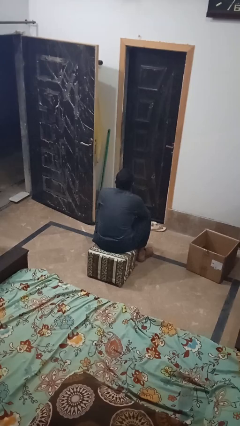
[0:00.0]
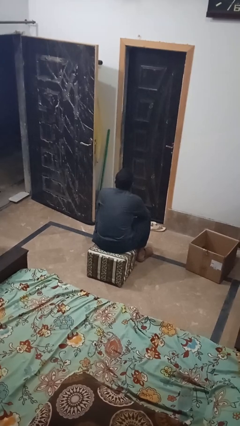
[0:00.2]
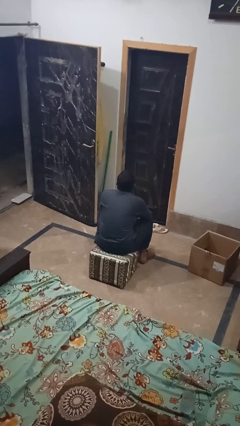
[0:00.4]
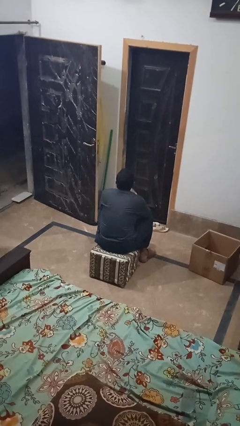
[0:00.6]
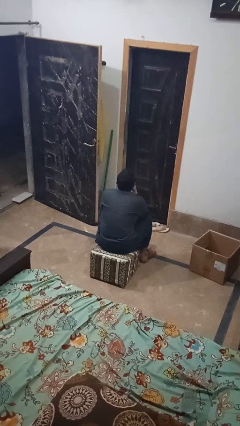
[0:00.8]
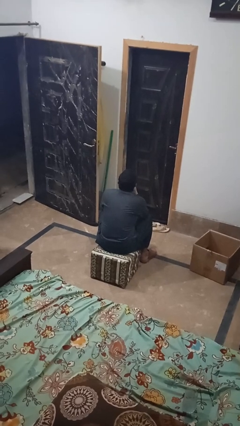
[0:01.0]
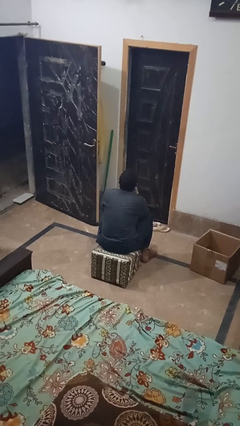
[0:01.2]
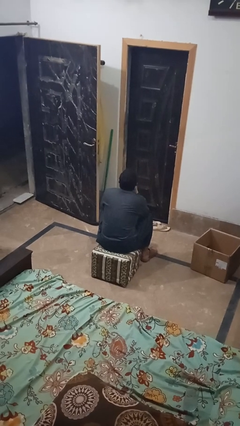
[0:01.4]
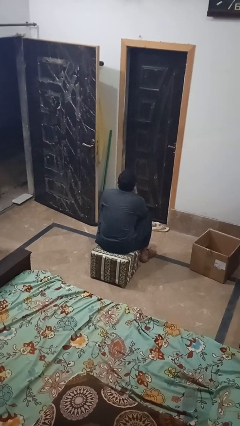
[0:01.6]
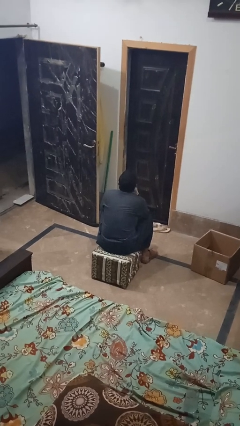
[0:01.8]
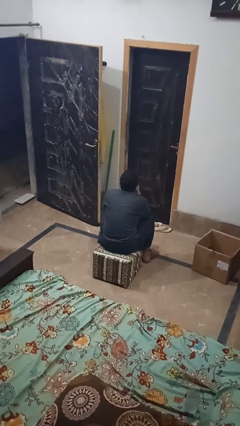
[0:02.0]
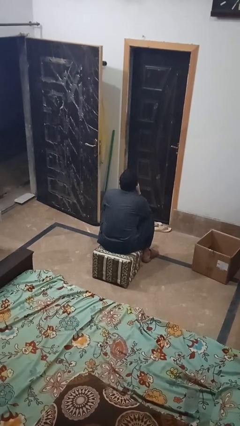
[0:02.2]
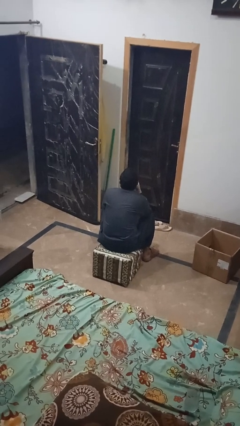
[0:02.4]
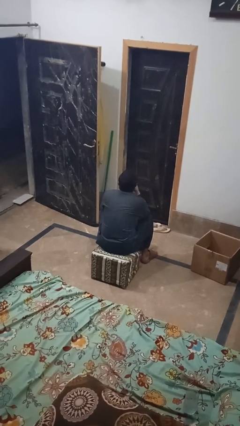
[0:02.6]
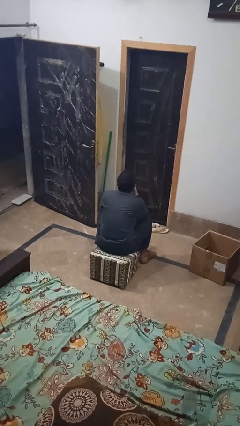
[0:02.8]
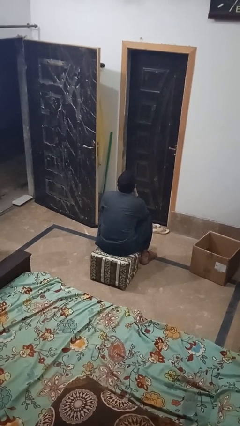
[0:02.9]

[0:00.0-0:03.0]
person strokes chin

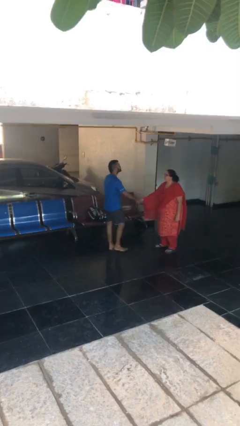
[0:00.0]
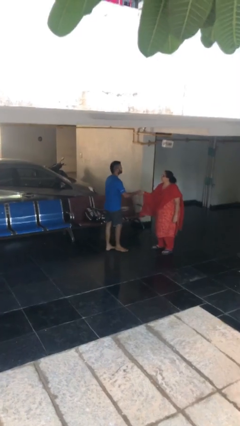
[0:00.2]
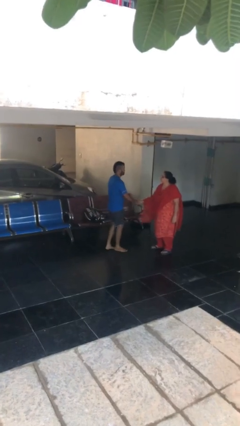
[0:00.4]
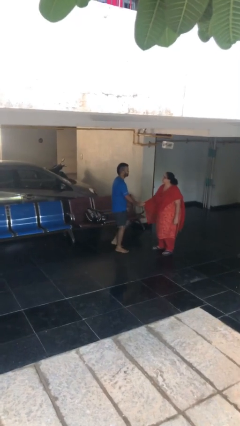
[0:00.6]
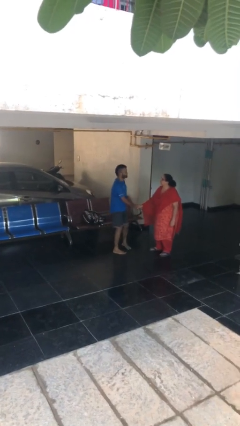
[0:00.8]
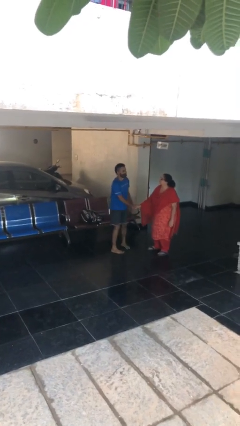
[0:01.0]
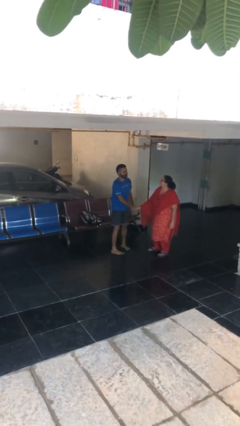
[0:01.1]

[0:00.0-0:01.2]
person shakes hand

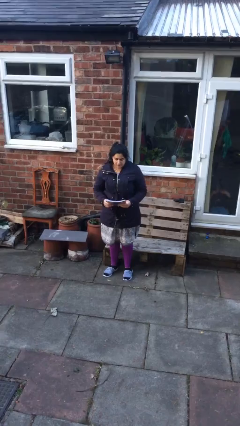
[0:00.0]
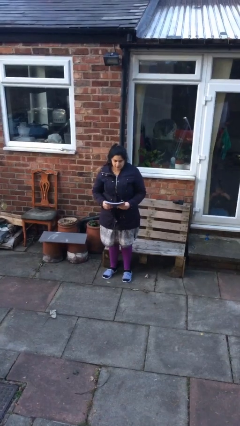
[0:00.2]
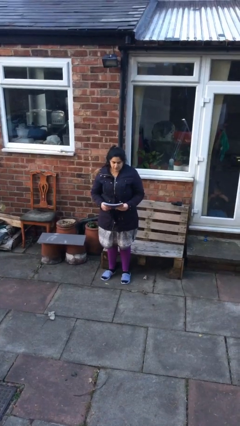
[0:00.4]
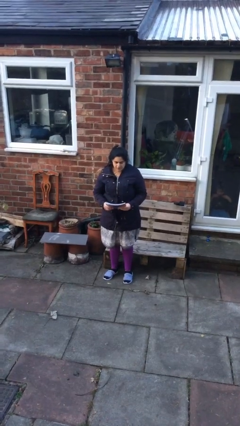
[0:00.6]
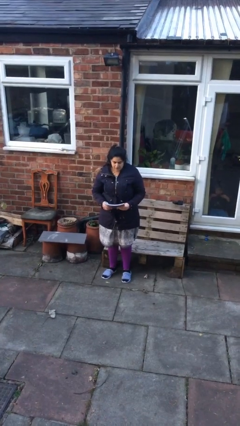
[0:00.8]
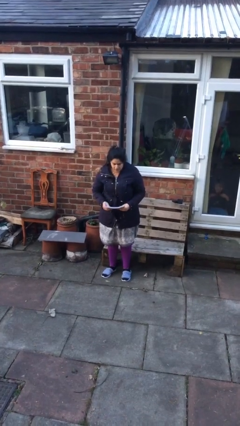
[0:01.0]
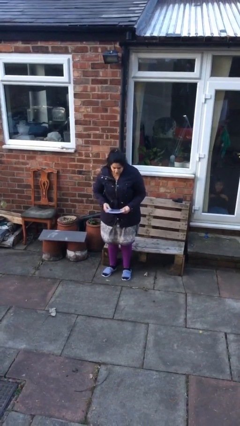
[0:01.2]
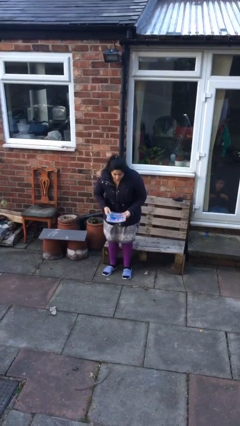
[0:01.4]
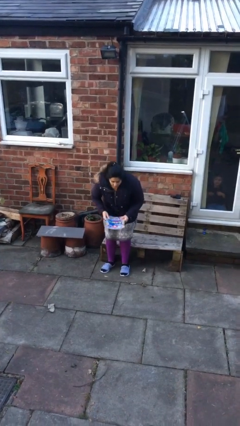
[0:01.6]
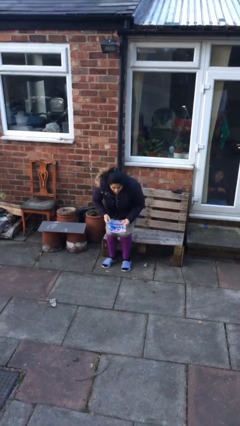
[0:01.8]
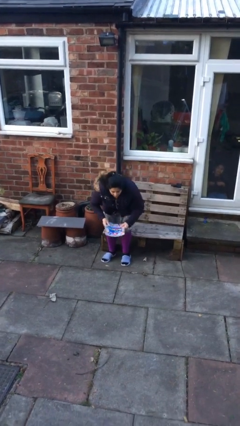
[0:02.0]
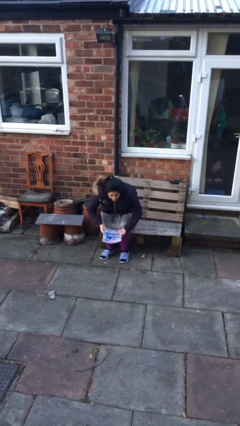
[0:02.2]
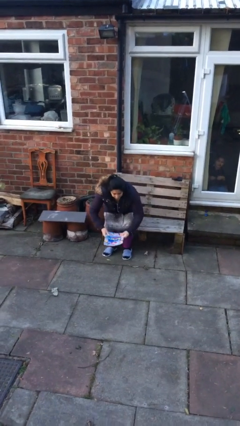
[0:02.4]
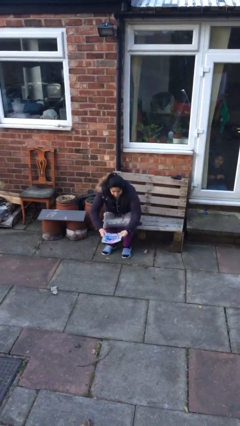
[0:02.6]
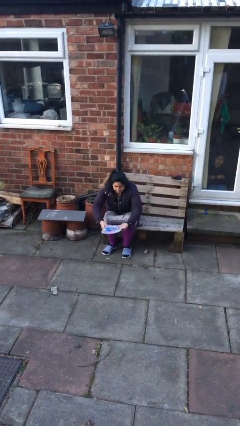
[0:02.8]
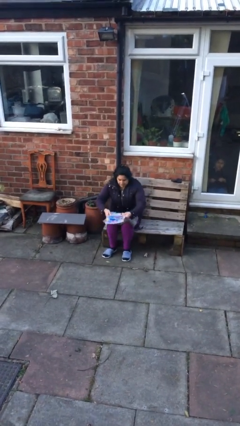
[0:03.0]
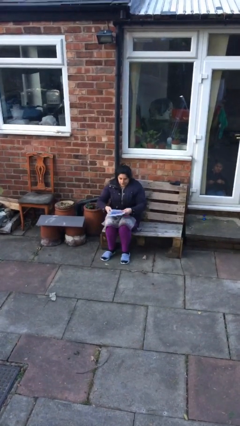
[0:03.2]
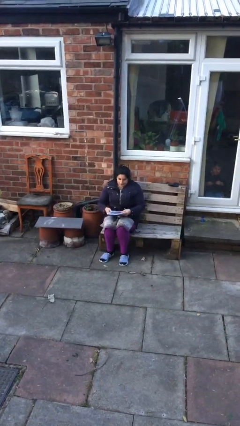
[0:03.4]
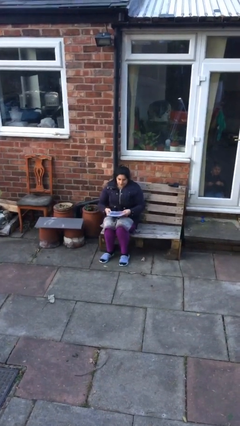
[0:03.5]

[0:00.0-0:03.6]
person sits down

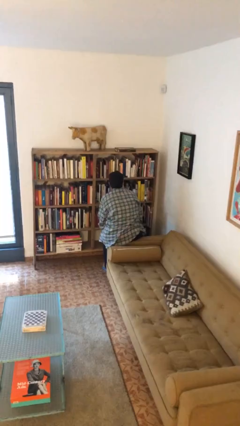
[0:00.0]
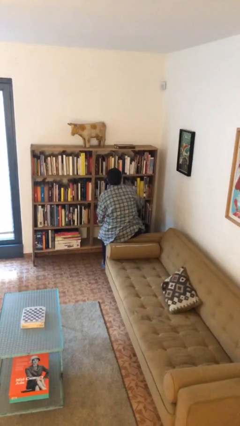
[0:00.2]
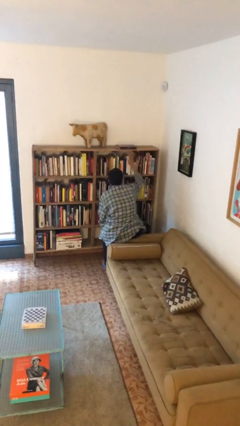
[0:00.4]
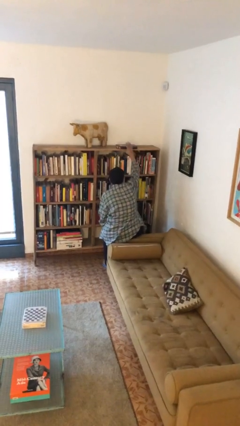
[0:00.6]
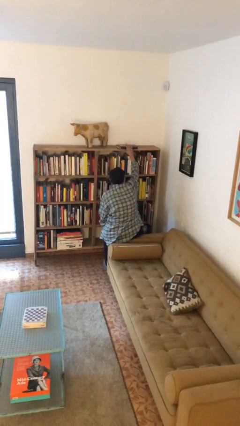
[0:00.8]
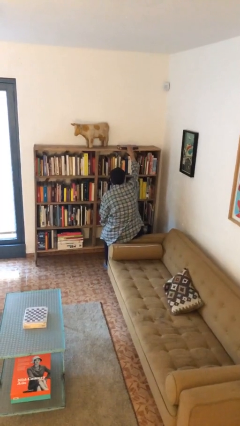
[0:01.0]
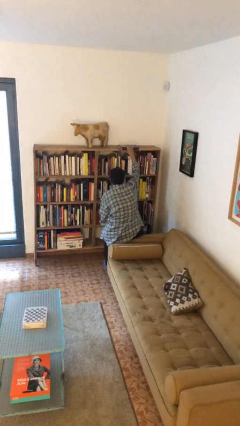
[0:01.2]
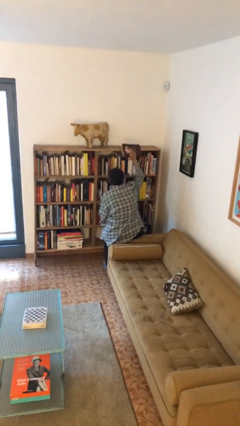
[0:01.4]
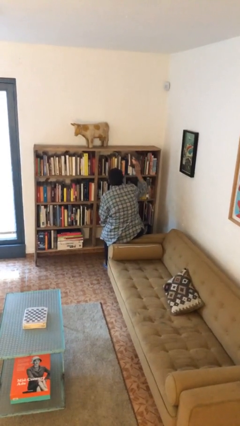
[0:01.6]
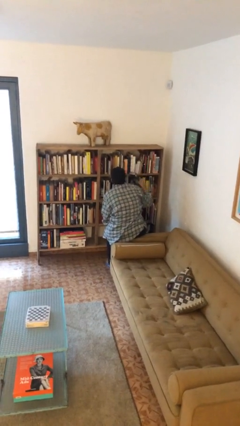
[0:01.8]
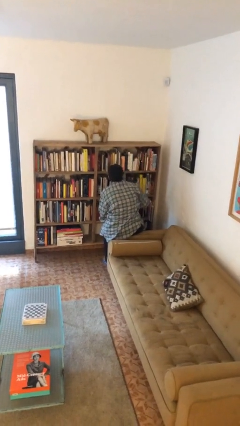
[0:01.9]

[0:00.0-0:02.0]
person picks up object from shelf

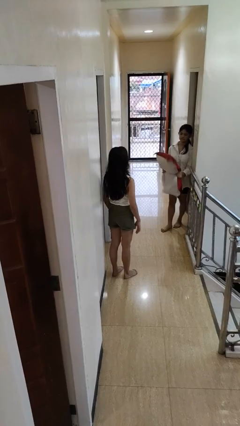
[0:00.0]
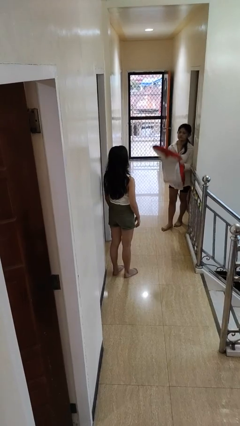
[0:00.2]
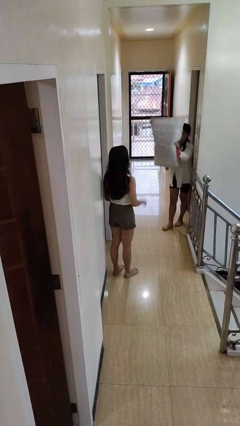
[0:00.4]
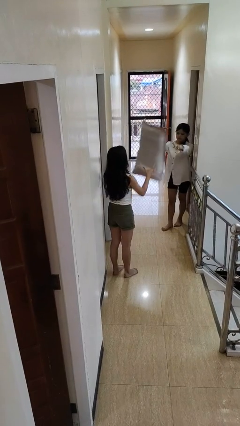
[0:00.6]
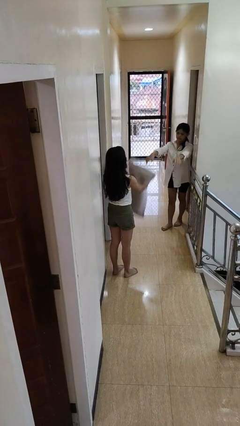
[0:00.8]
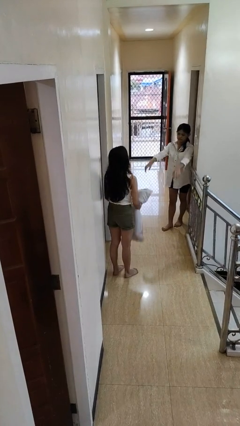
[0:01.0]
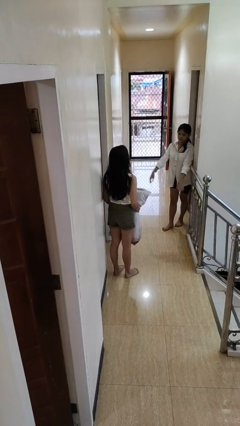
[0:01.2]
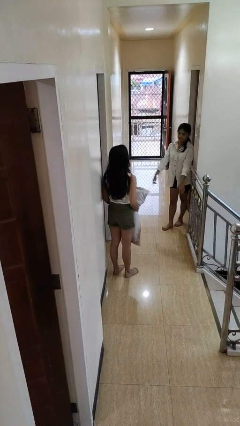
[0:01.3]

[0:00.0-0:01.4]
person catches object from person

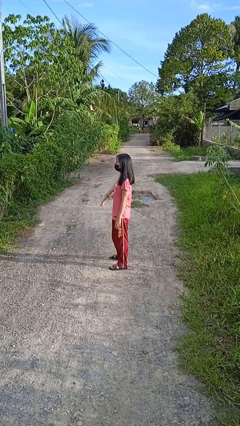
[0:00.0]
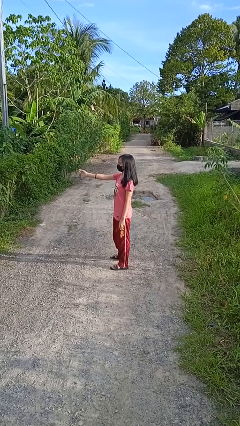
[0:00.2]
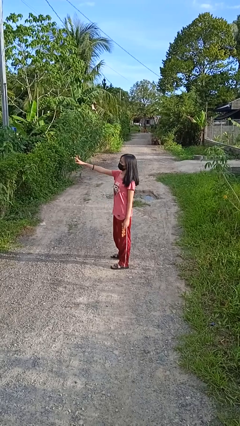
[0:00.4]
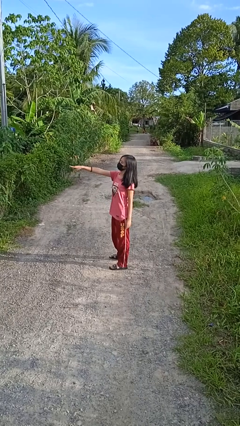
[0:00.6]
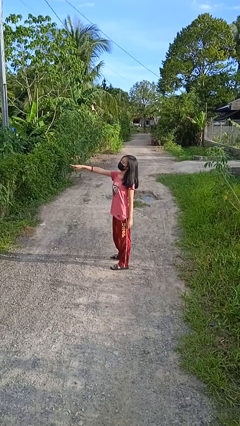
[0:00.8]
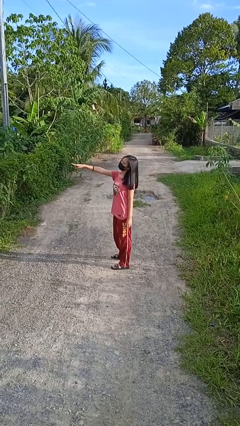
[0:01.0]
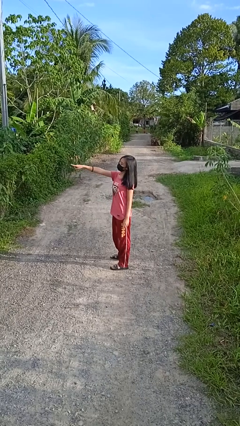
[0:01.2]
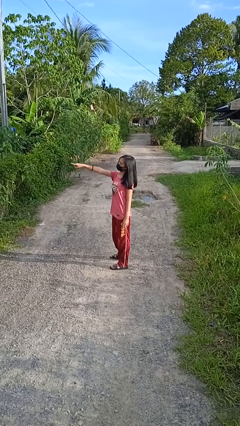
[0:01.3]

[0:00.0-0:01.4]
person points at person

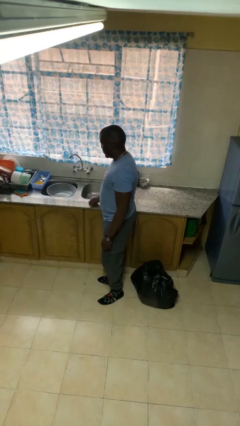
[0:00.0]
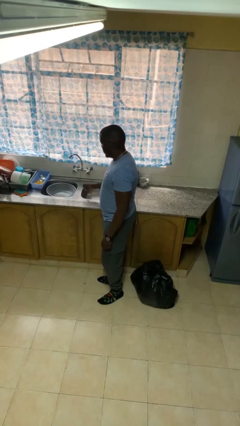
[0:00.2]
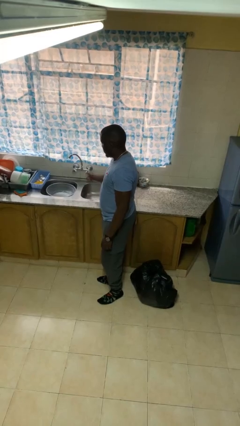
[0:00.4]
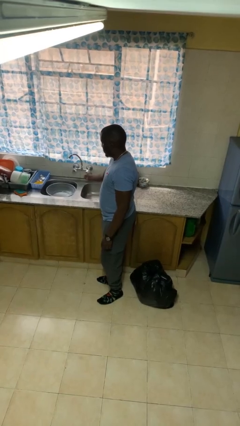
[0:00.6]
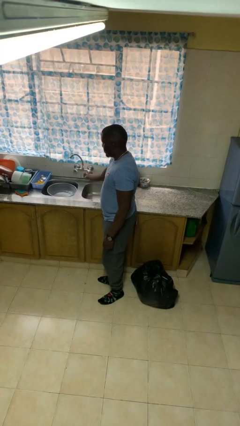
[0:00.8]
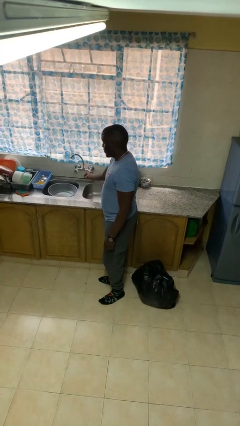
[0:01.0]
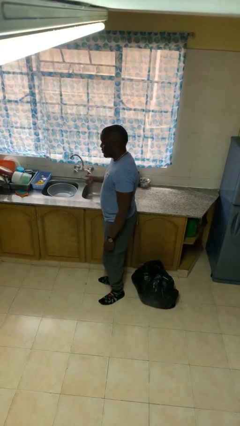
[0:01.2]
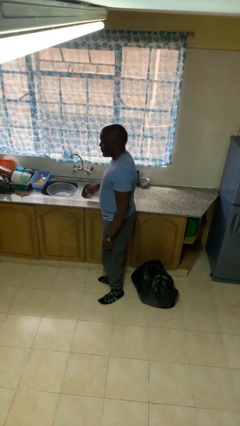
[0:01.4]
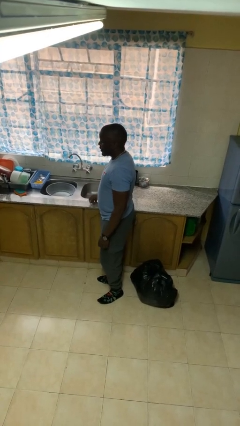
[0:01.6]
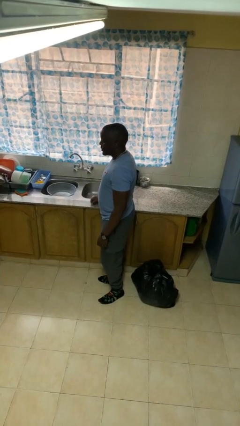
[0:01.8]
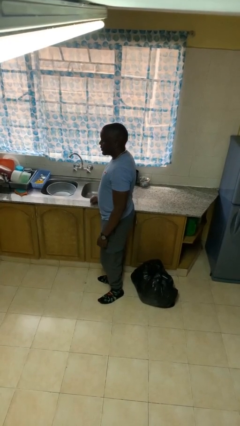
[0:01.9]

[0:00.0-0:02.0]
person turns off faucet

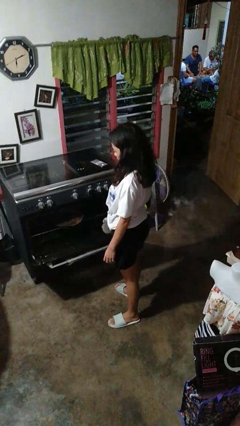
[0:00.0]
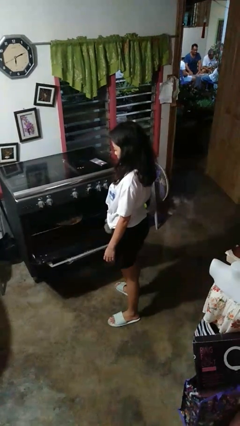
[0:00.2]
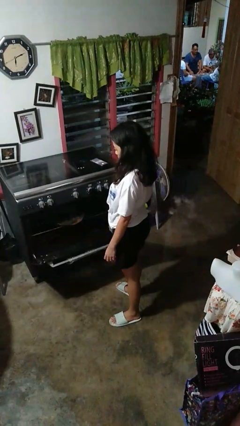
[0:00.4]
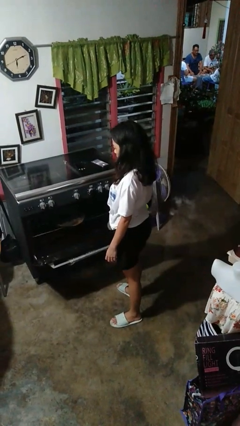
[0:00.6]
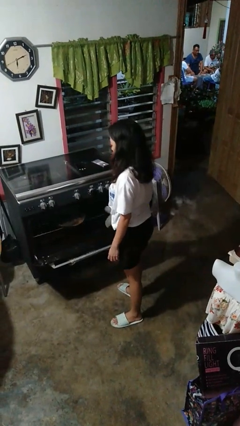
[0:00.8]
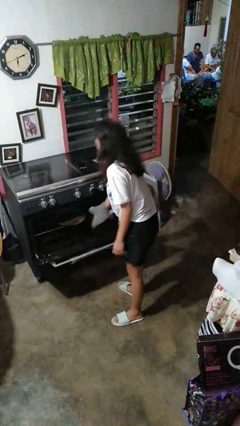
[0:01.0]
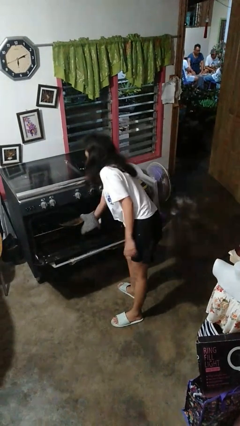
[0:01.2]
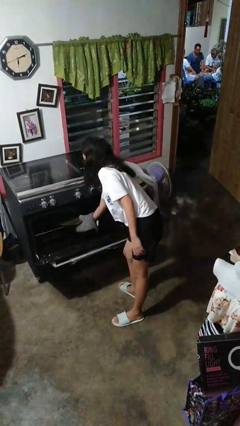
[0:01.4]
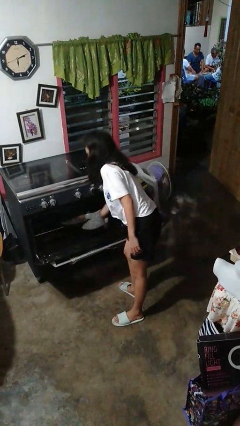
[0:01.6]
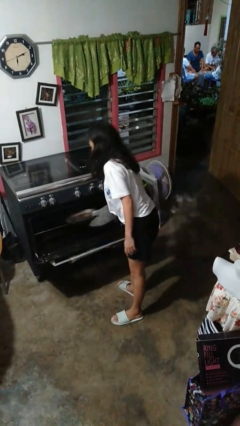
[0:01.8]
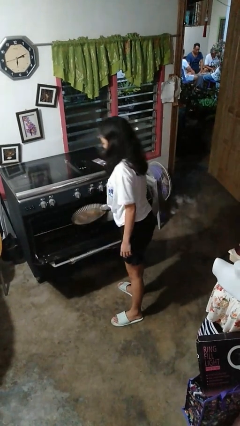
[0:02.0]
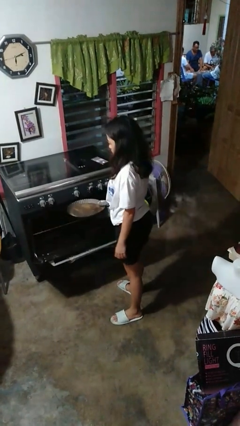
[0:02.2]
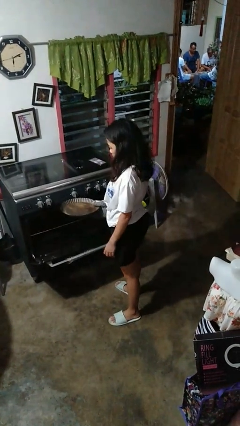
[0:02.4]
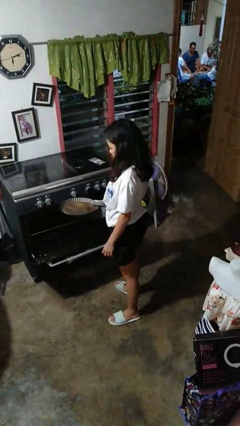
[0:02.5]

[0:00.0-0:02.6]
person takes object from oven

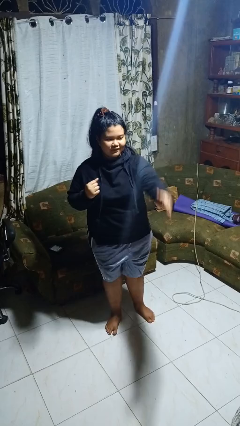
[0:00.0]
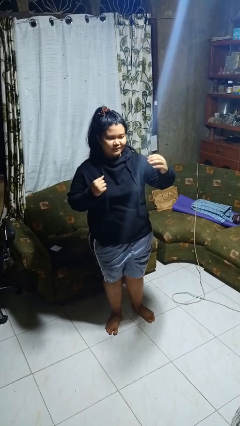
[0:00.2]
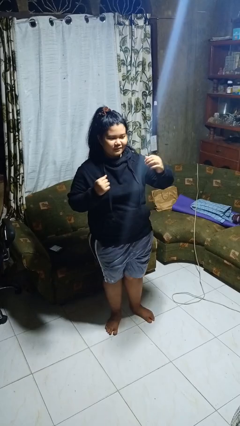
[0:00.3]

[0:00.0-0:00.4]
person karate chop
